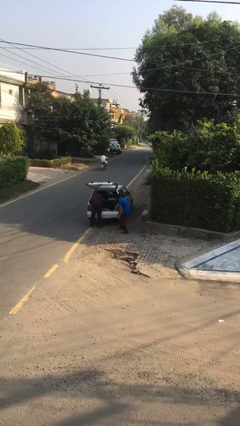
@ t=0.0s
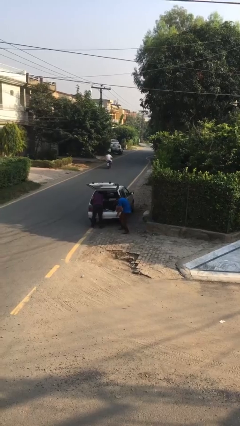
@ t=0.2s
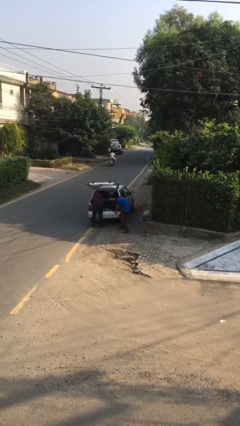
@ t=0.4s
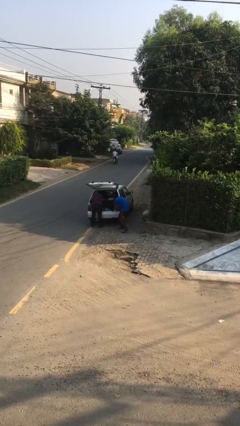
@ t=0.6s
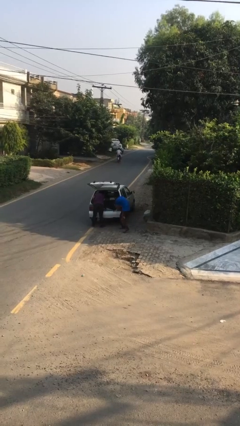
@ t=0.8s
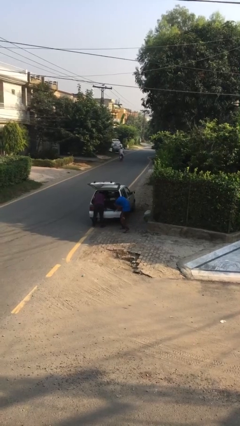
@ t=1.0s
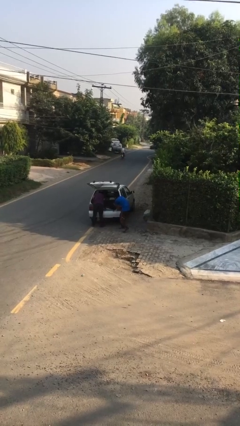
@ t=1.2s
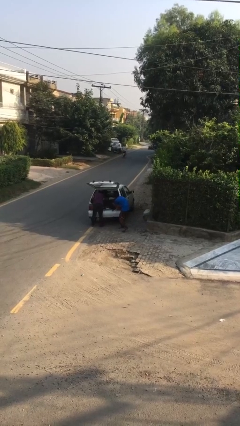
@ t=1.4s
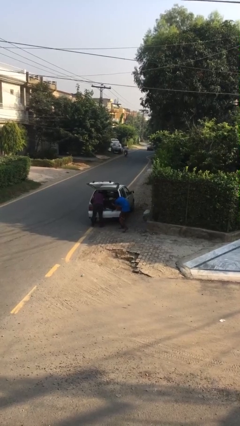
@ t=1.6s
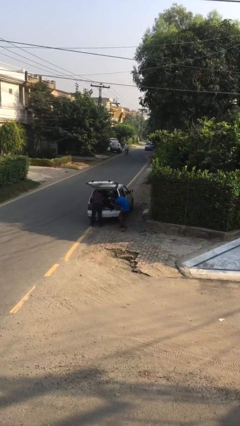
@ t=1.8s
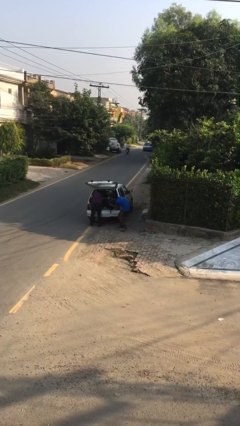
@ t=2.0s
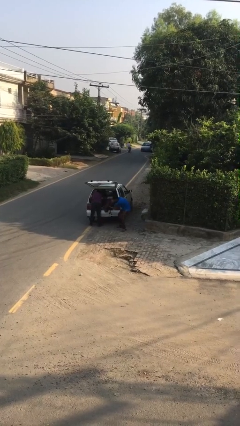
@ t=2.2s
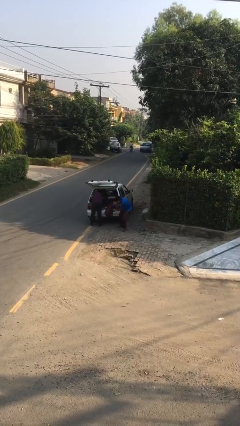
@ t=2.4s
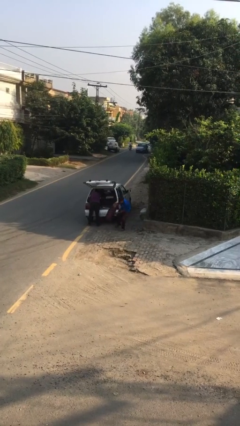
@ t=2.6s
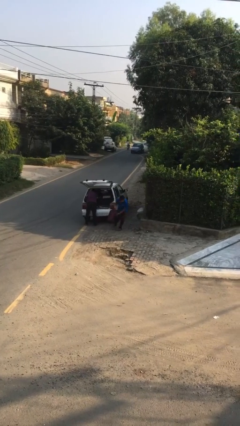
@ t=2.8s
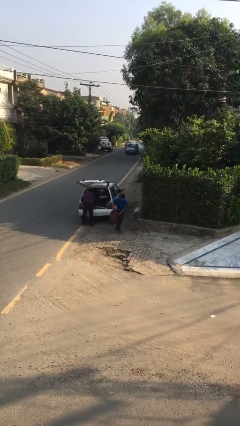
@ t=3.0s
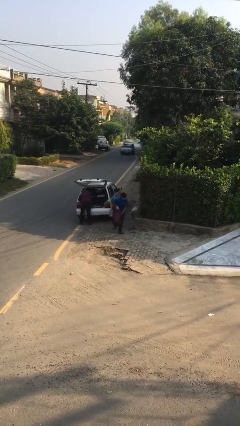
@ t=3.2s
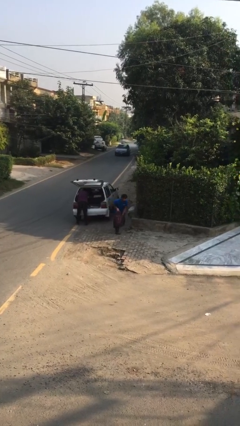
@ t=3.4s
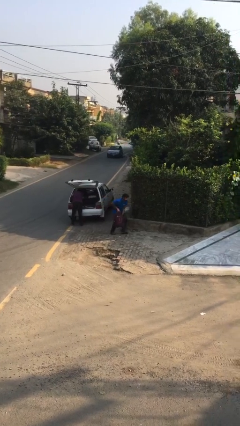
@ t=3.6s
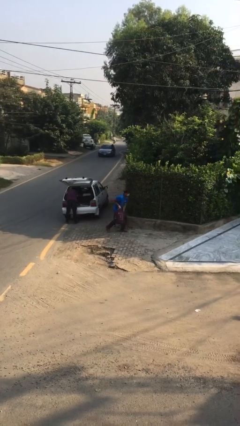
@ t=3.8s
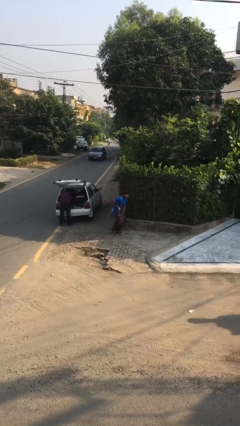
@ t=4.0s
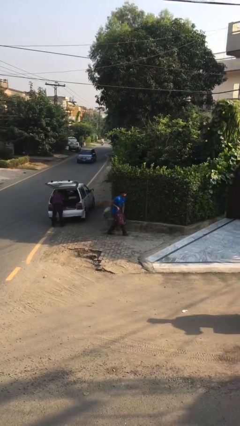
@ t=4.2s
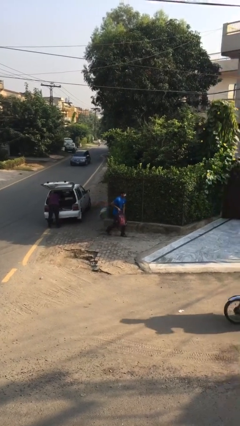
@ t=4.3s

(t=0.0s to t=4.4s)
person steals object from person

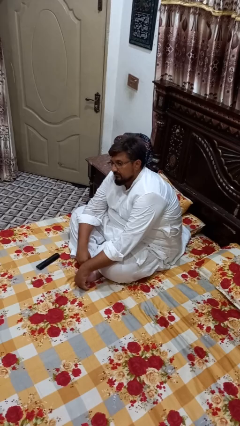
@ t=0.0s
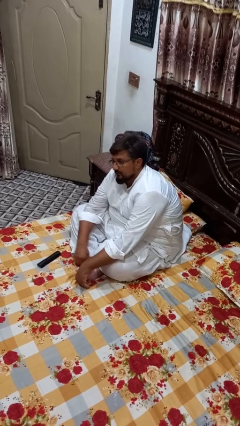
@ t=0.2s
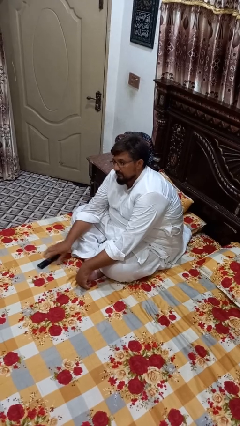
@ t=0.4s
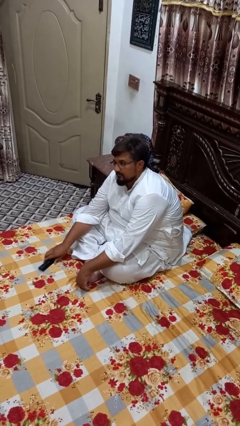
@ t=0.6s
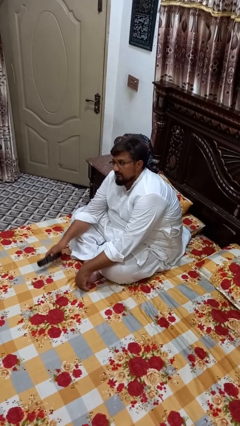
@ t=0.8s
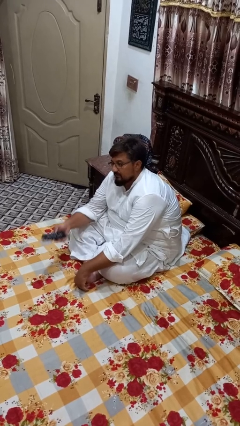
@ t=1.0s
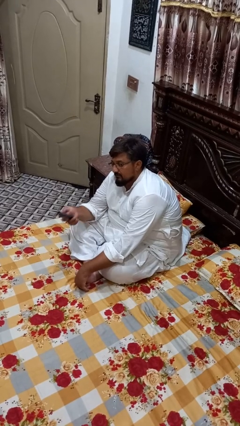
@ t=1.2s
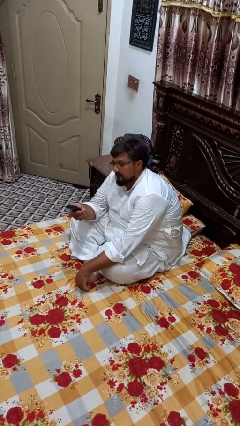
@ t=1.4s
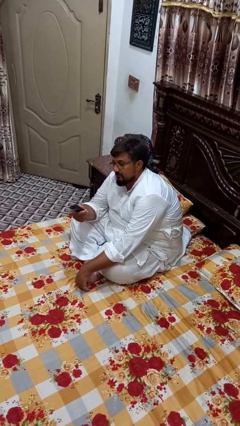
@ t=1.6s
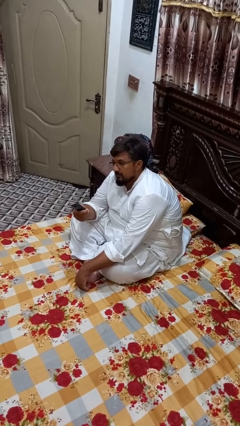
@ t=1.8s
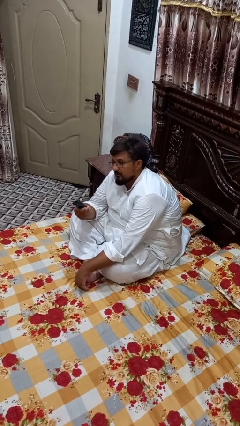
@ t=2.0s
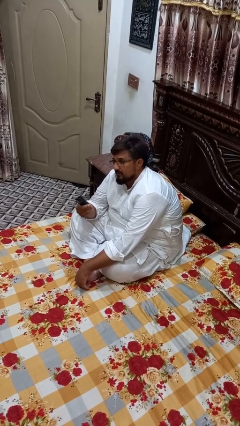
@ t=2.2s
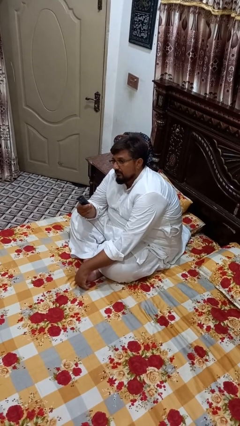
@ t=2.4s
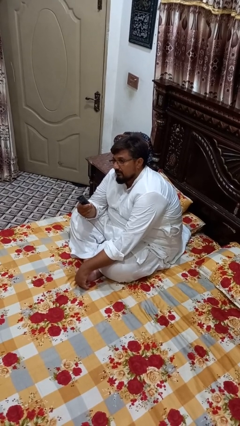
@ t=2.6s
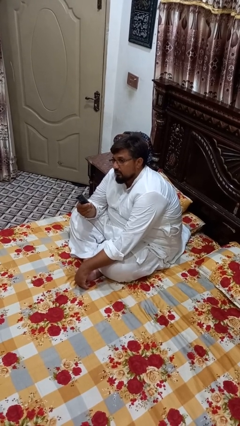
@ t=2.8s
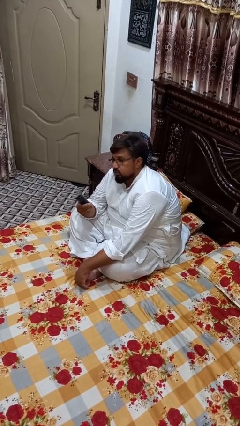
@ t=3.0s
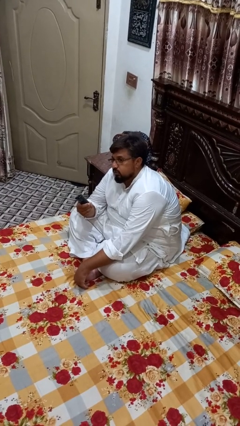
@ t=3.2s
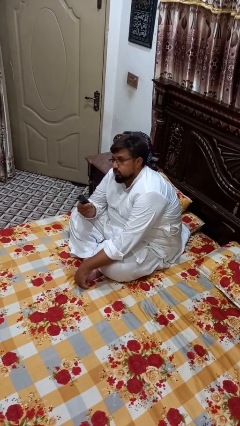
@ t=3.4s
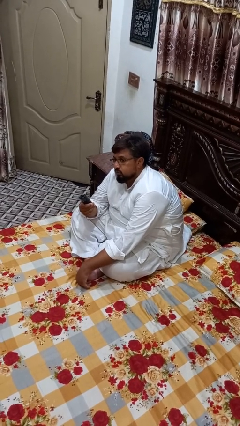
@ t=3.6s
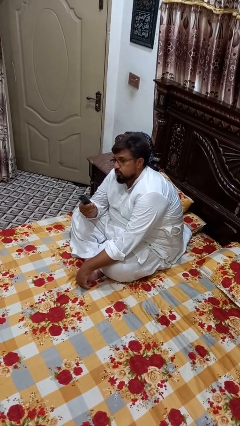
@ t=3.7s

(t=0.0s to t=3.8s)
person uses television remote

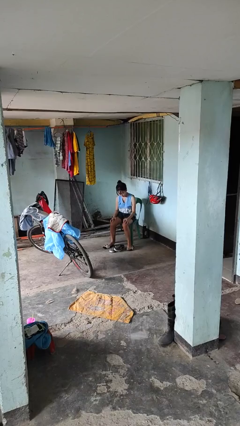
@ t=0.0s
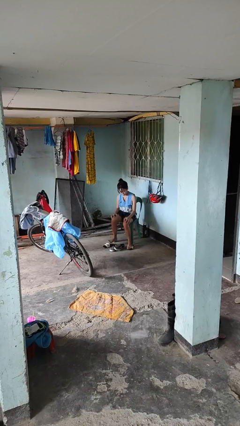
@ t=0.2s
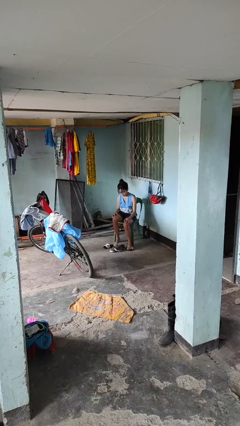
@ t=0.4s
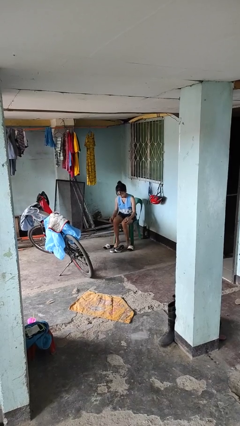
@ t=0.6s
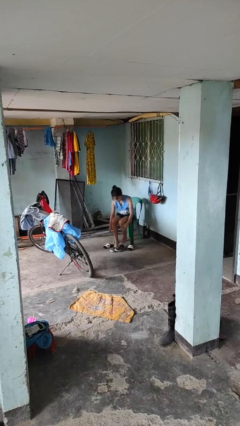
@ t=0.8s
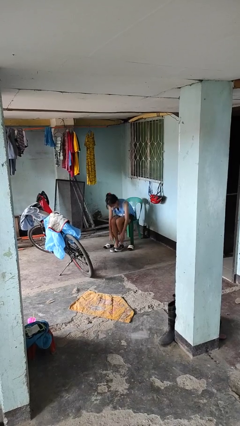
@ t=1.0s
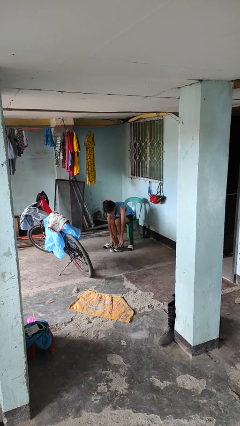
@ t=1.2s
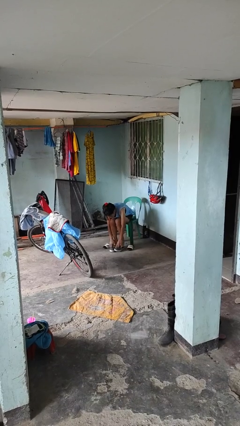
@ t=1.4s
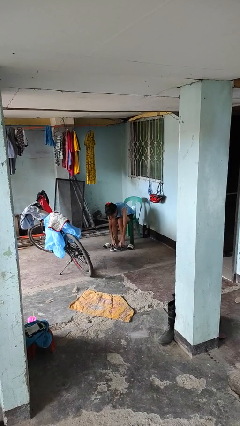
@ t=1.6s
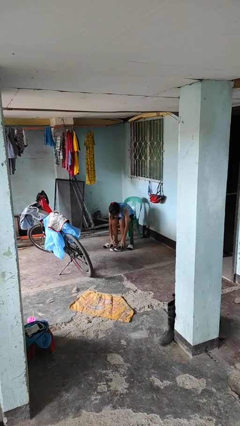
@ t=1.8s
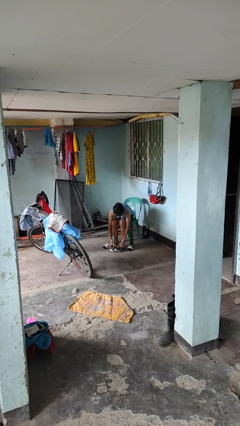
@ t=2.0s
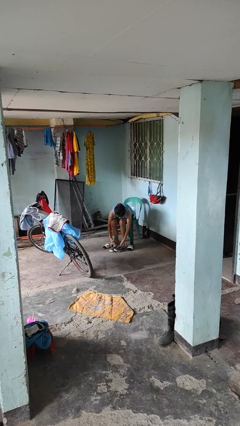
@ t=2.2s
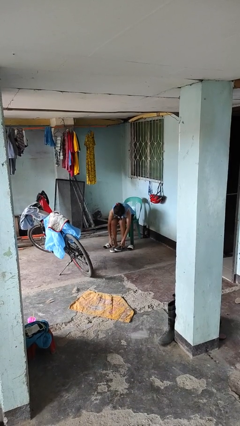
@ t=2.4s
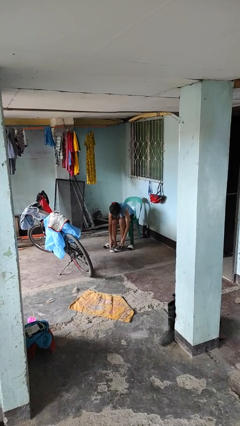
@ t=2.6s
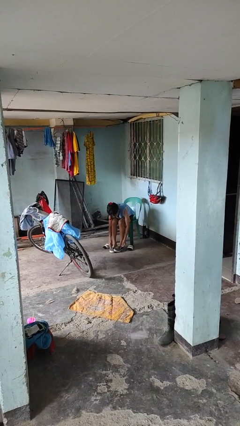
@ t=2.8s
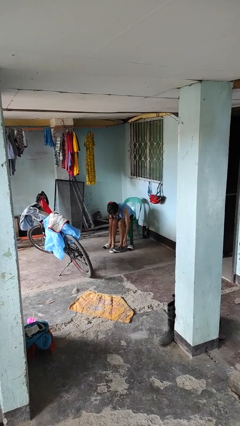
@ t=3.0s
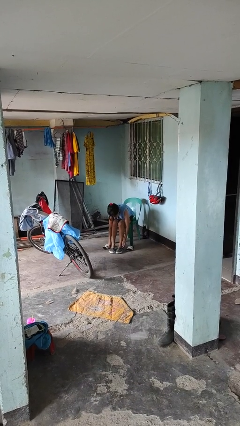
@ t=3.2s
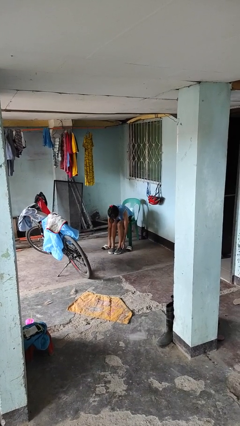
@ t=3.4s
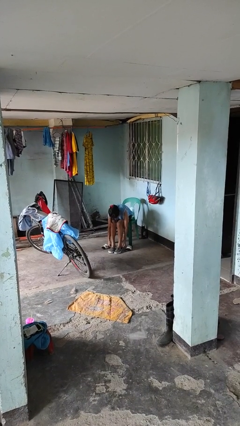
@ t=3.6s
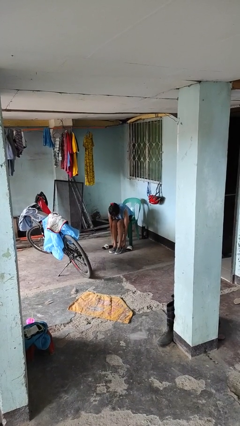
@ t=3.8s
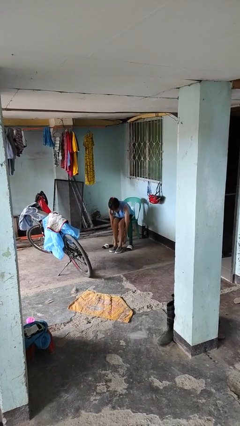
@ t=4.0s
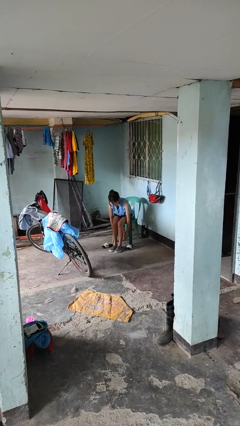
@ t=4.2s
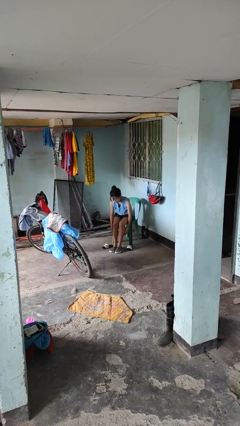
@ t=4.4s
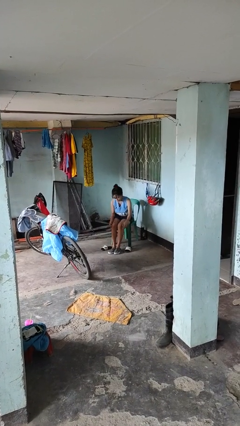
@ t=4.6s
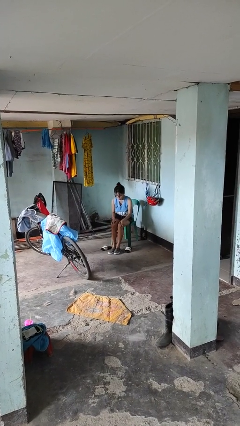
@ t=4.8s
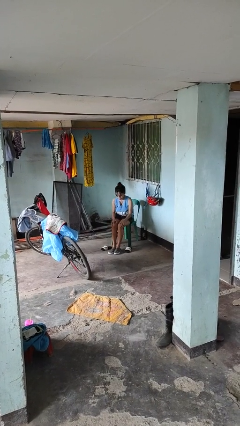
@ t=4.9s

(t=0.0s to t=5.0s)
person puts on shoes

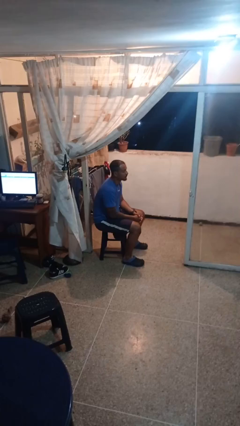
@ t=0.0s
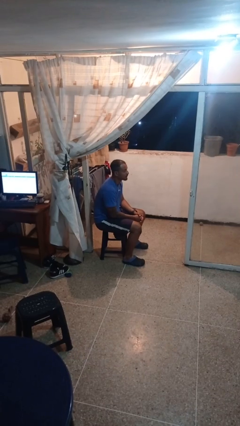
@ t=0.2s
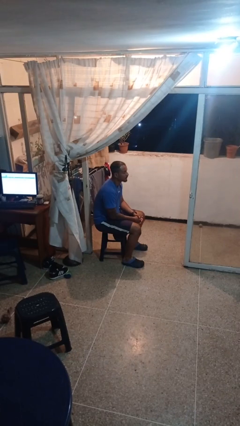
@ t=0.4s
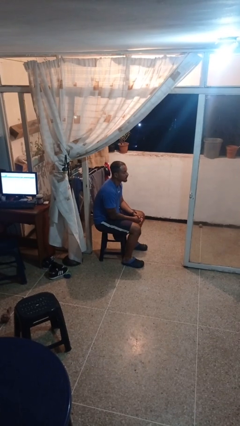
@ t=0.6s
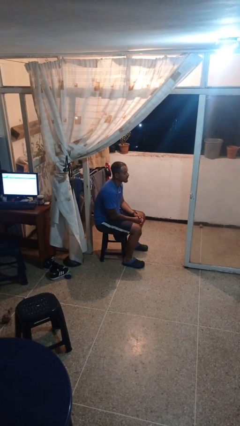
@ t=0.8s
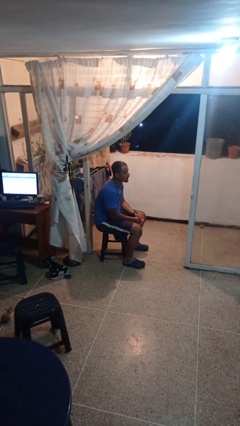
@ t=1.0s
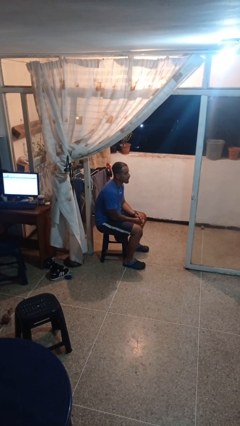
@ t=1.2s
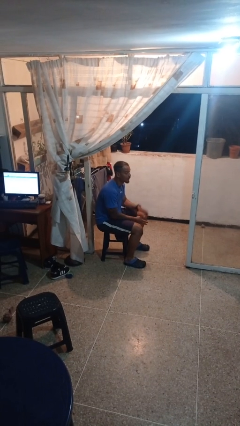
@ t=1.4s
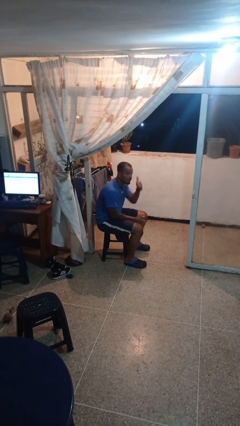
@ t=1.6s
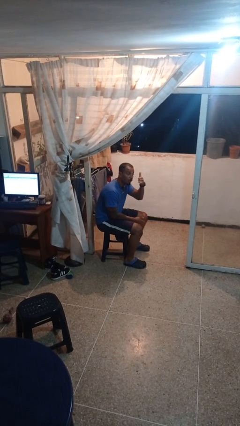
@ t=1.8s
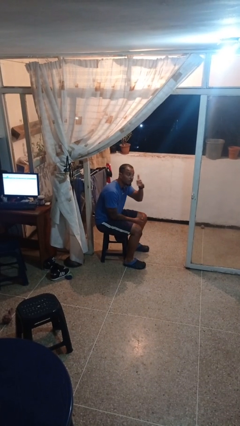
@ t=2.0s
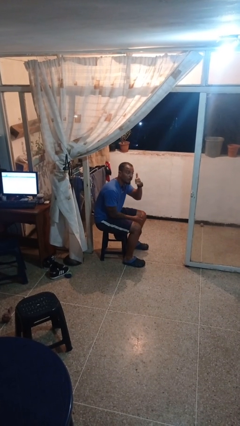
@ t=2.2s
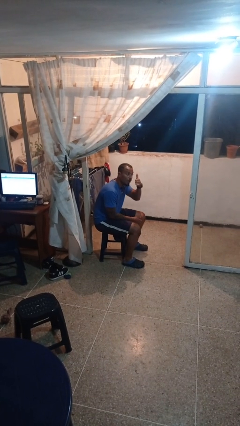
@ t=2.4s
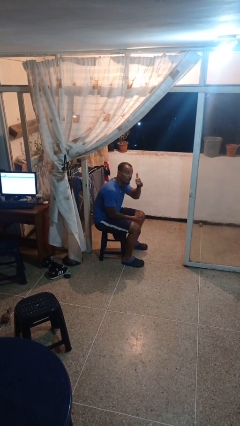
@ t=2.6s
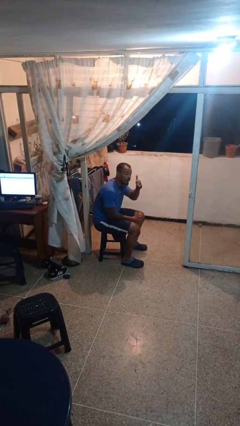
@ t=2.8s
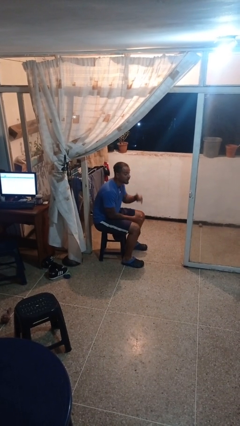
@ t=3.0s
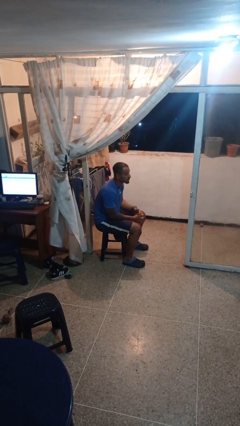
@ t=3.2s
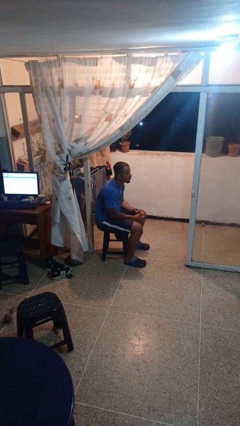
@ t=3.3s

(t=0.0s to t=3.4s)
person gestures call me

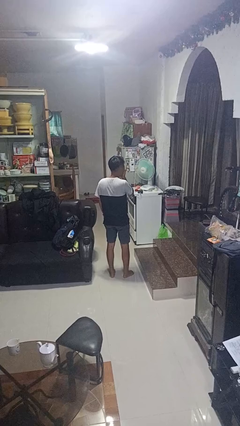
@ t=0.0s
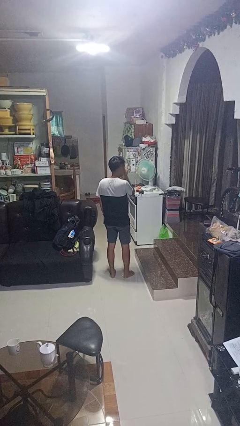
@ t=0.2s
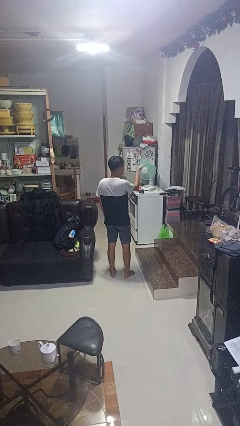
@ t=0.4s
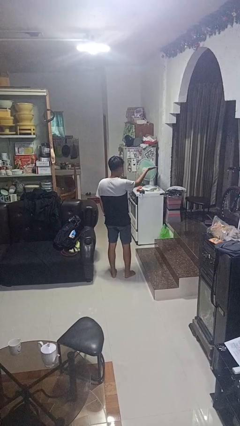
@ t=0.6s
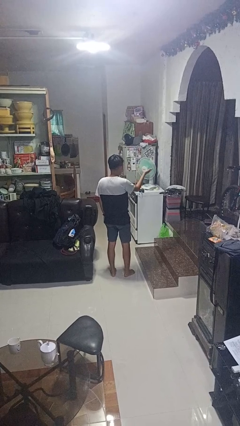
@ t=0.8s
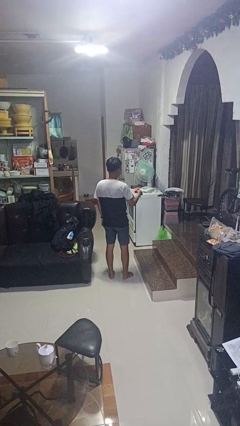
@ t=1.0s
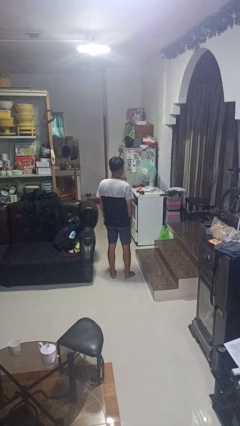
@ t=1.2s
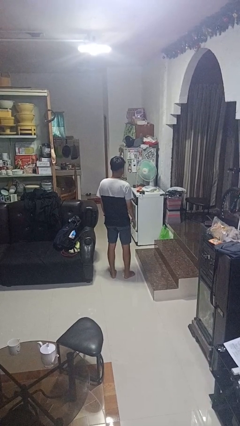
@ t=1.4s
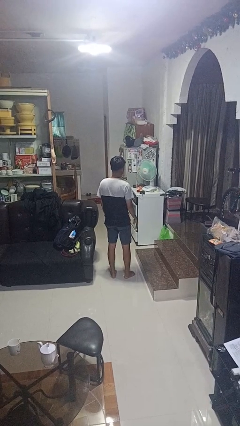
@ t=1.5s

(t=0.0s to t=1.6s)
person gestures blow kiss
